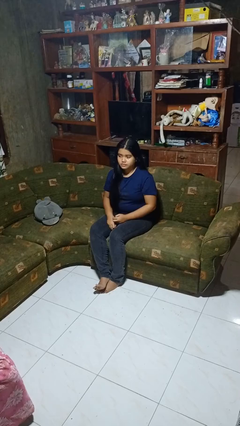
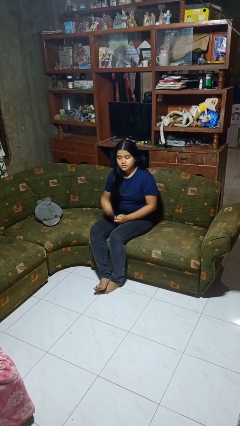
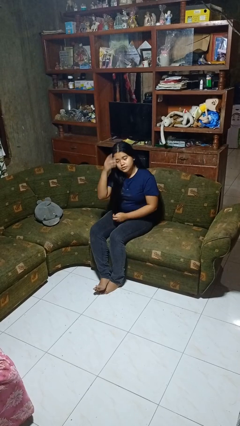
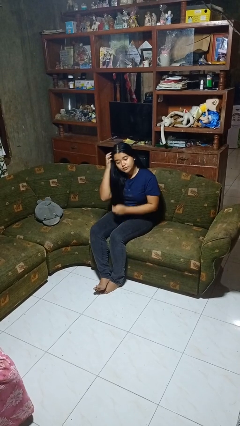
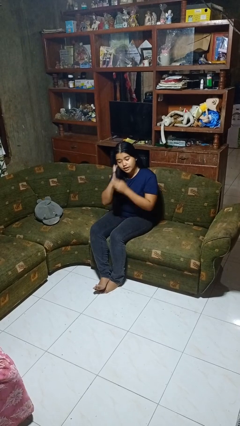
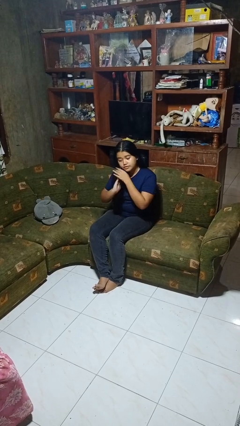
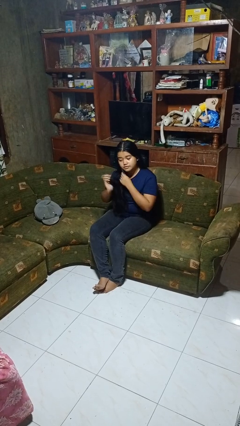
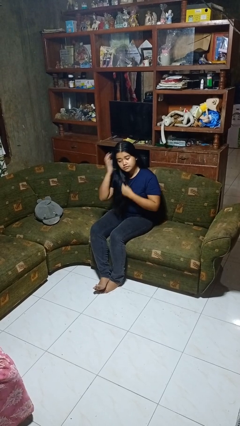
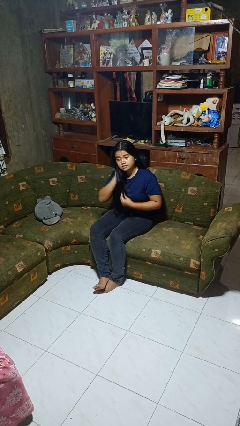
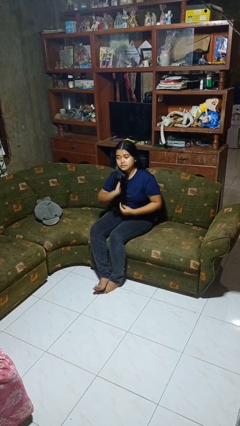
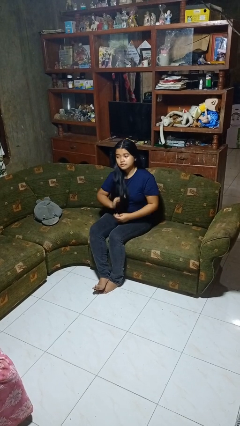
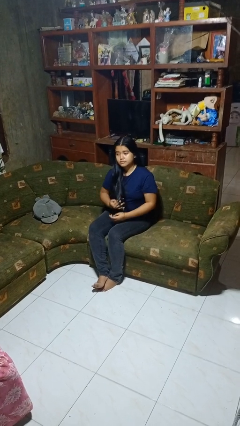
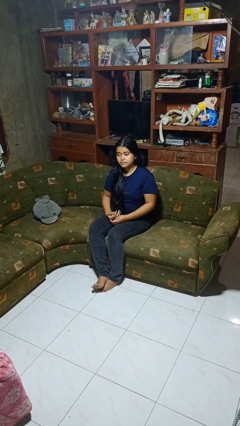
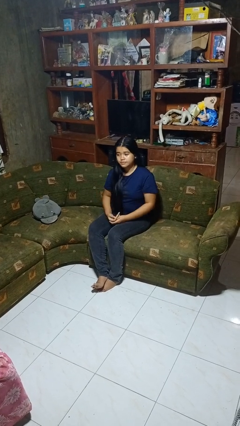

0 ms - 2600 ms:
person strokes hair

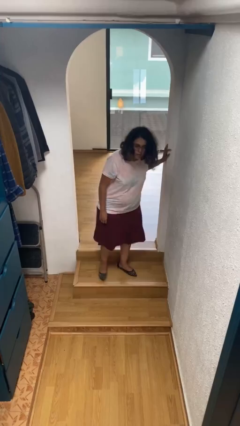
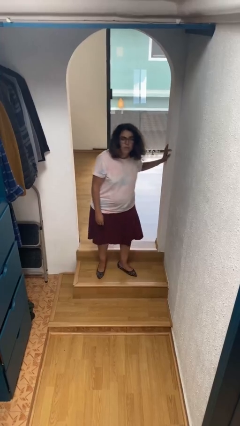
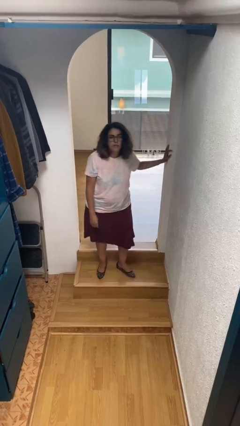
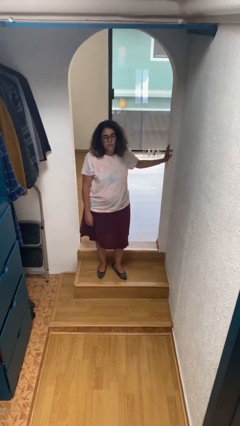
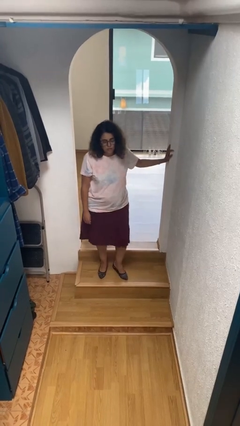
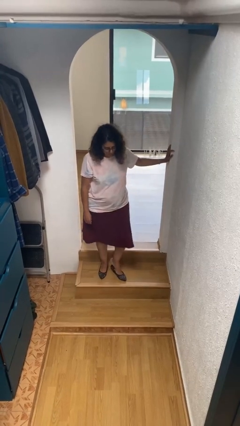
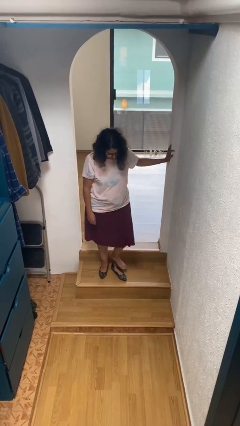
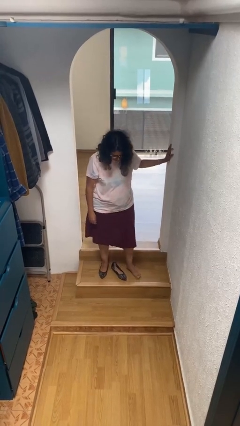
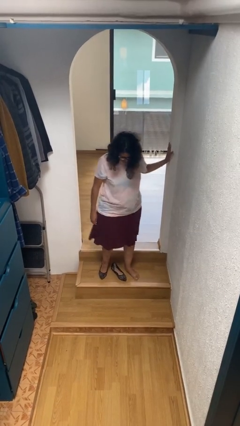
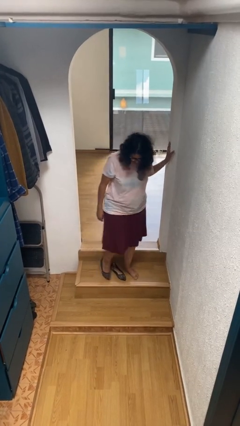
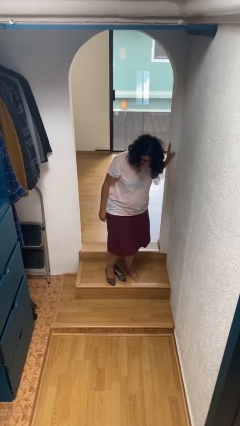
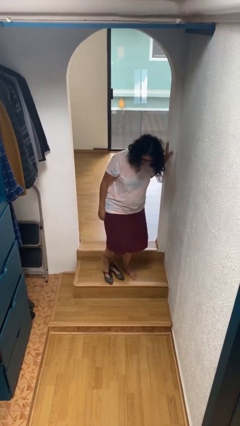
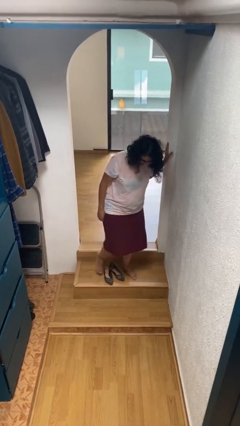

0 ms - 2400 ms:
person takes off shoes

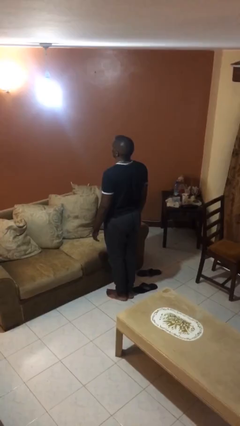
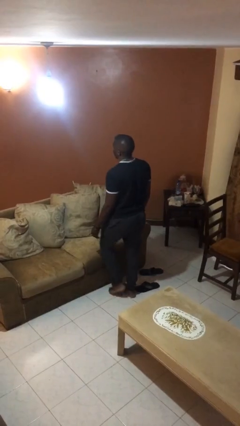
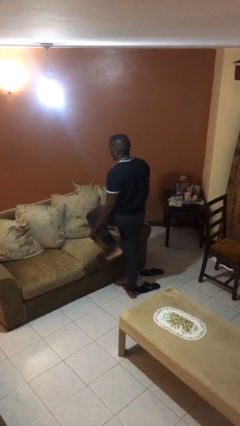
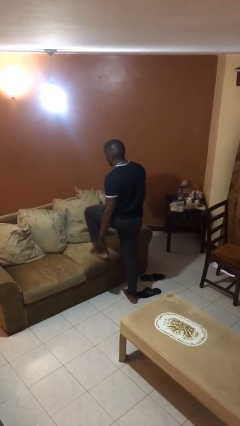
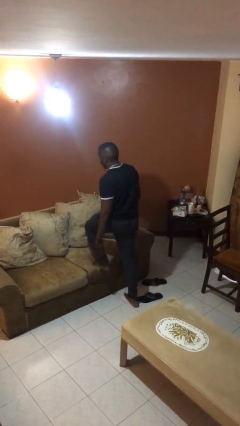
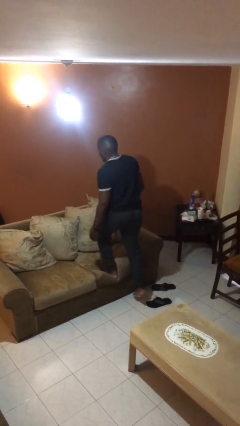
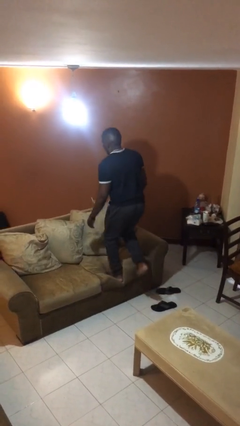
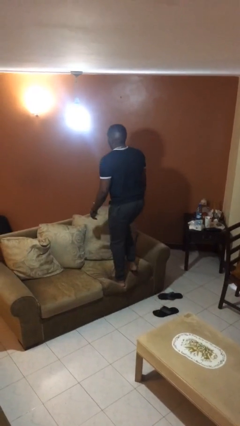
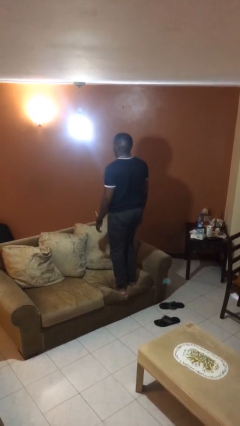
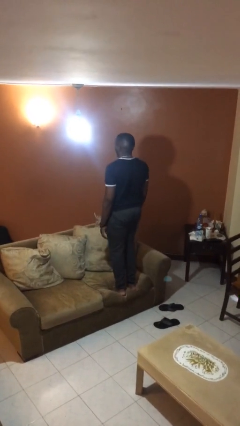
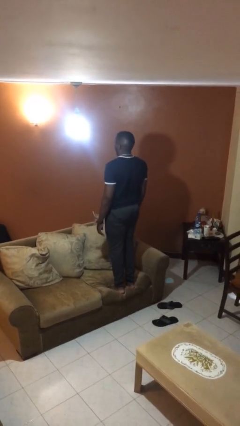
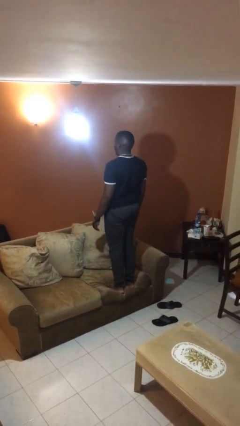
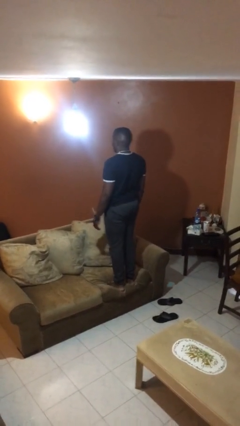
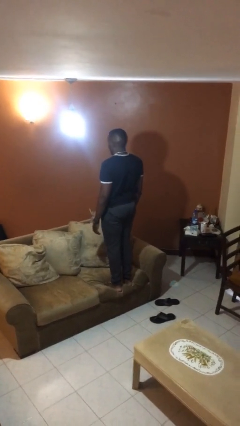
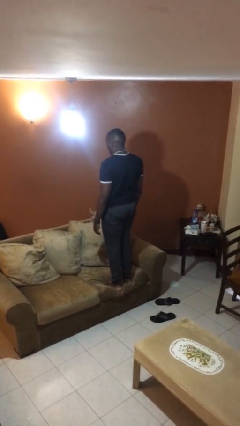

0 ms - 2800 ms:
person climbs on couch

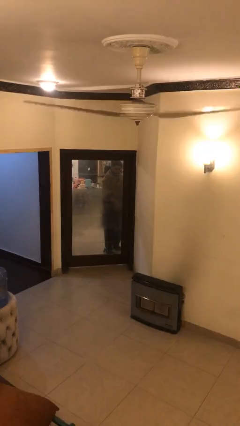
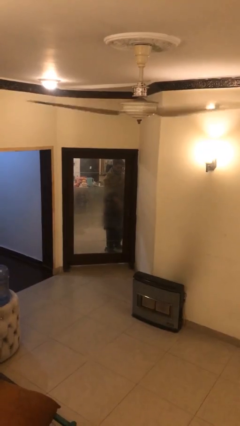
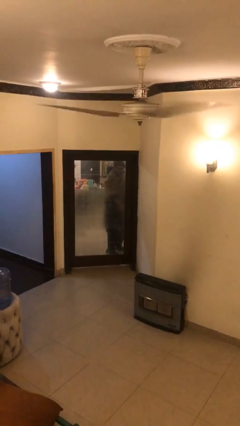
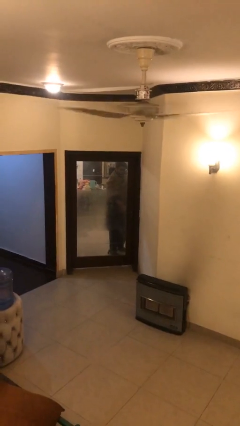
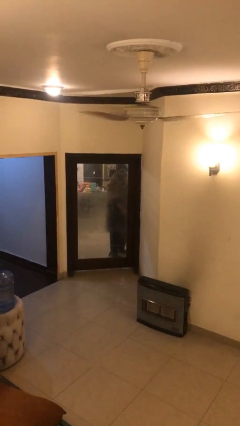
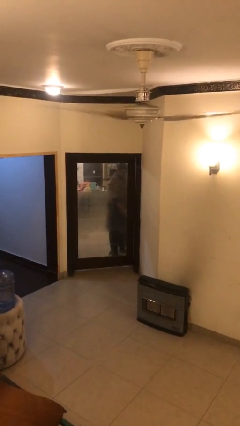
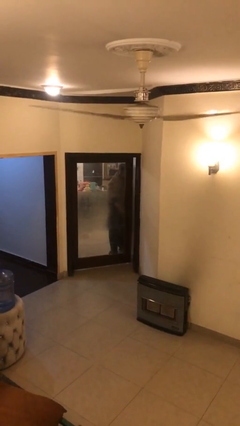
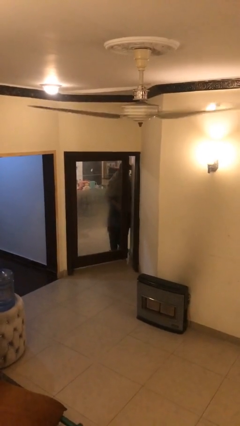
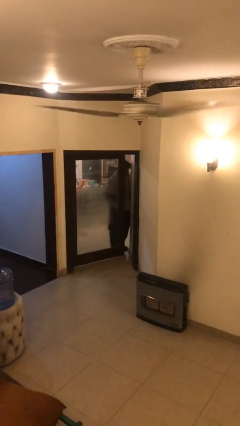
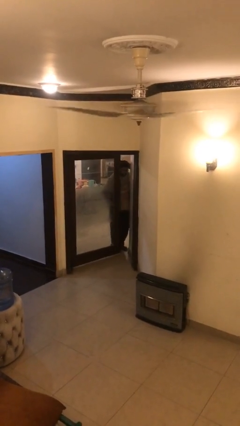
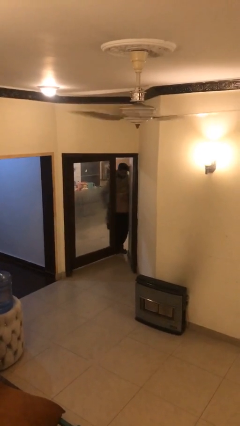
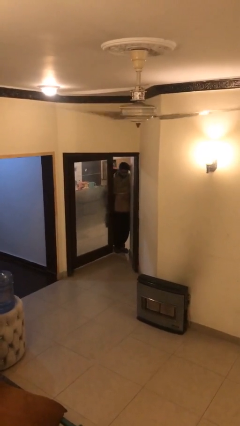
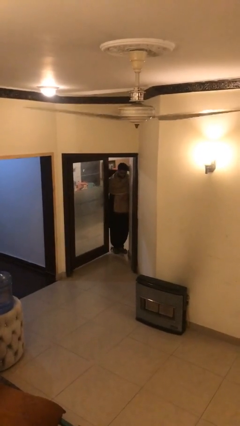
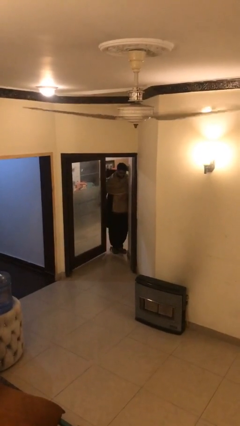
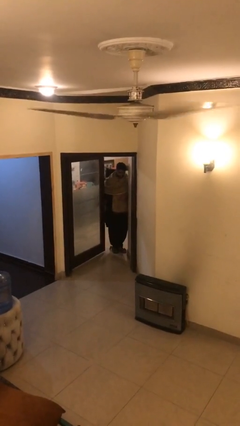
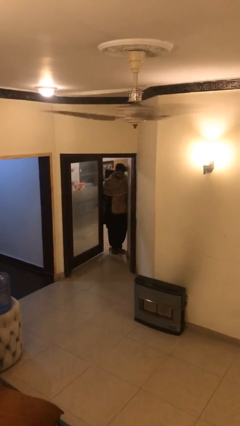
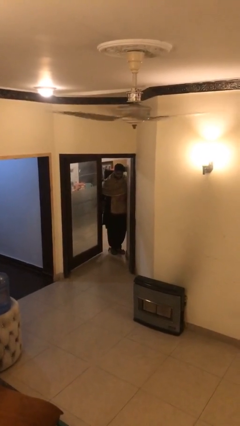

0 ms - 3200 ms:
person opens facility door

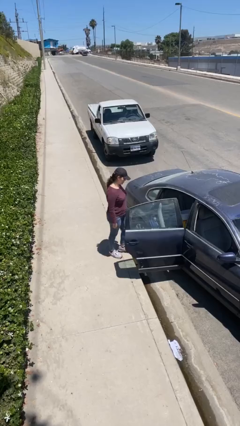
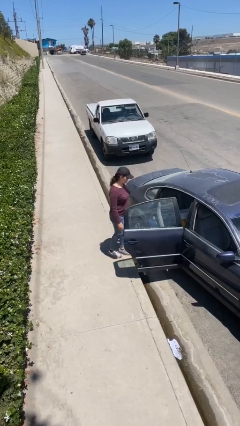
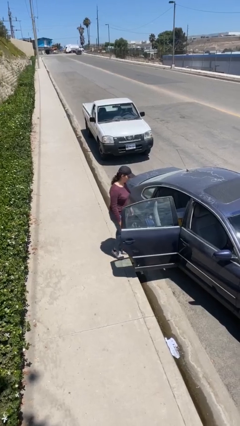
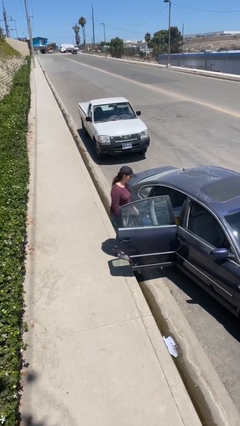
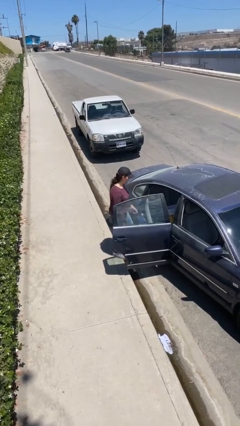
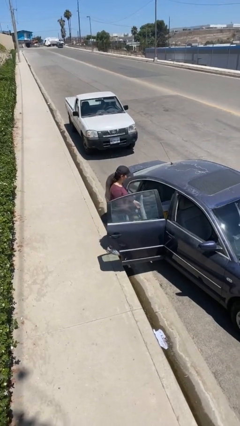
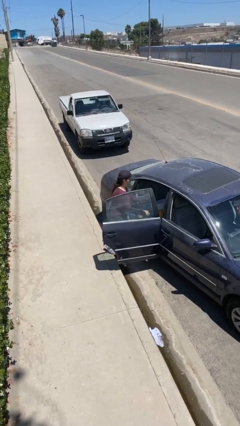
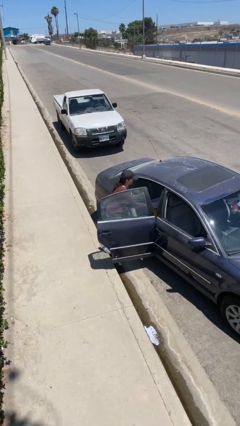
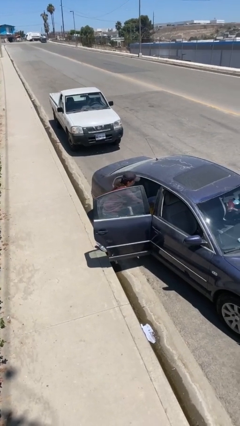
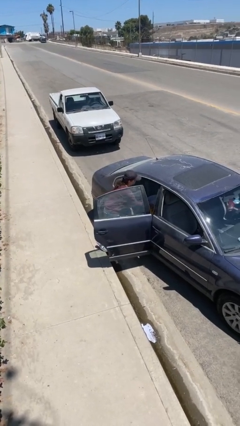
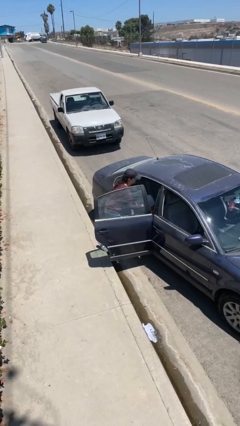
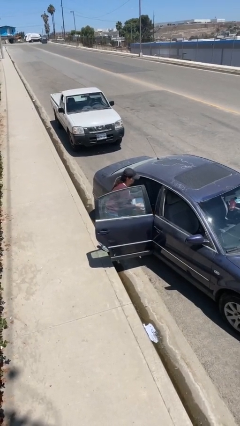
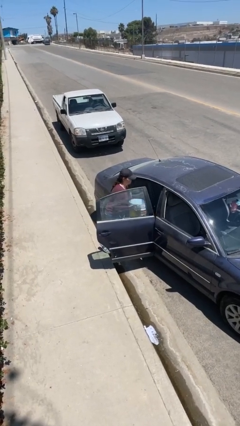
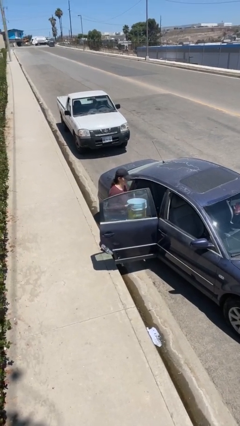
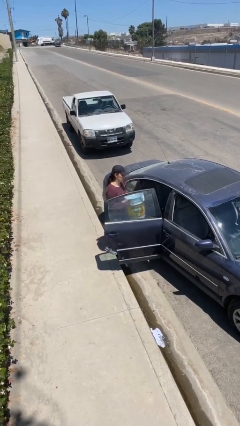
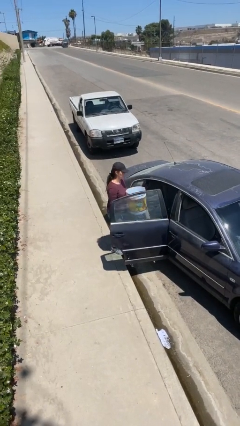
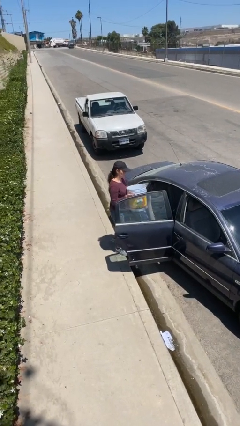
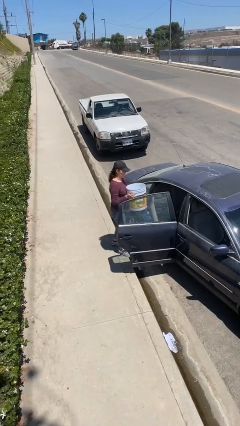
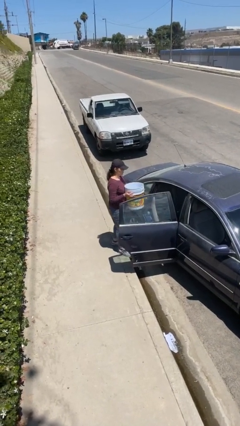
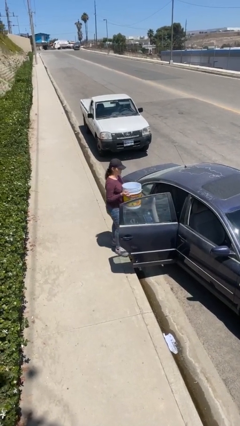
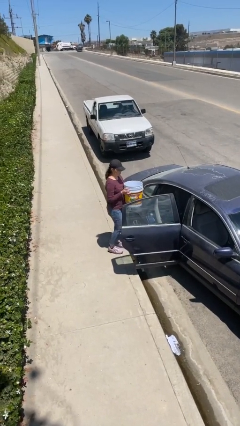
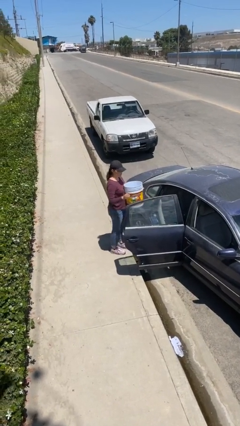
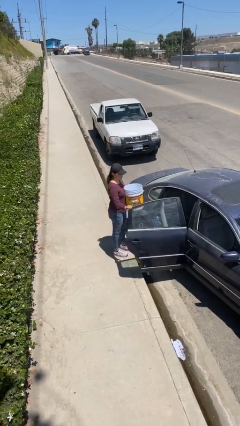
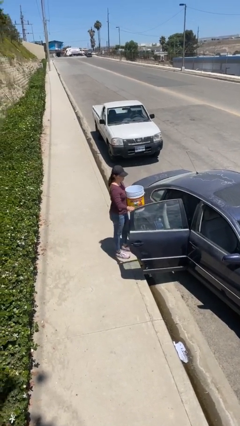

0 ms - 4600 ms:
person unloads car

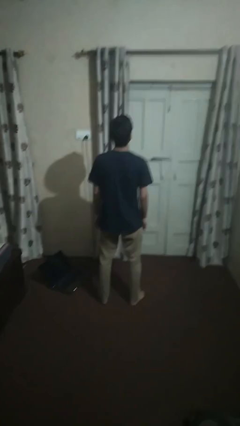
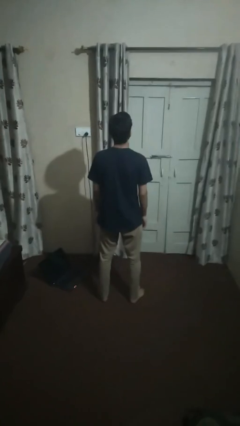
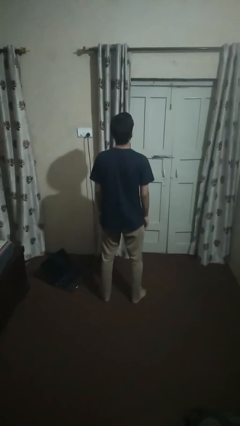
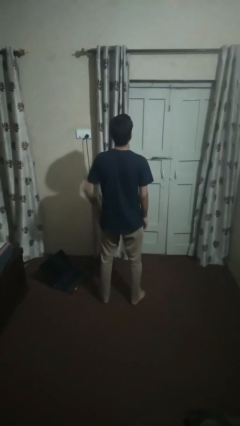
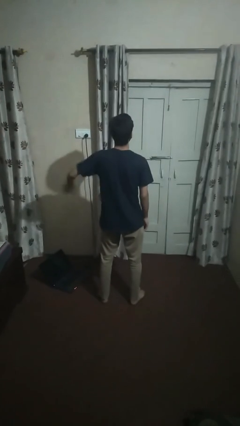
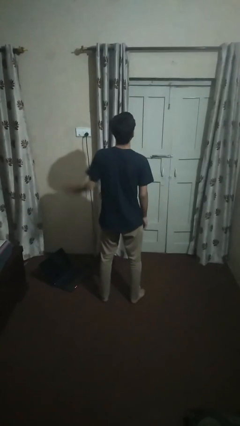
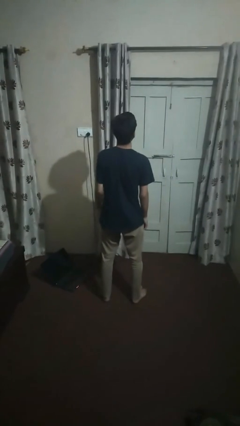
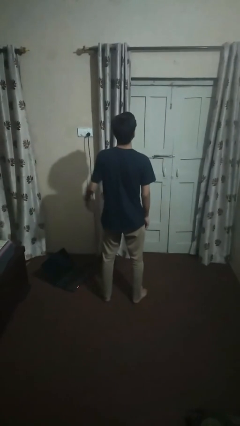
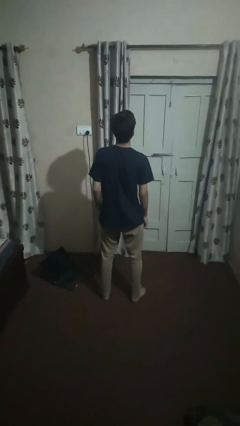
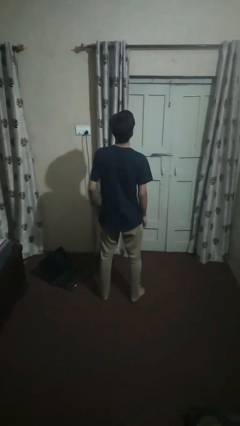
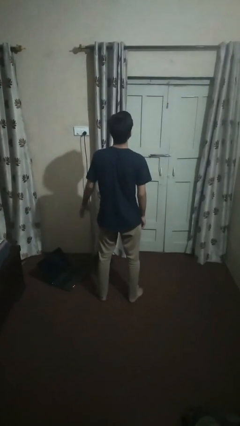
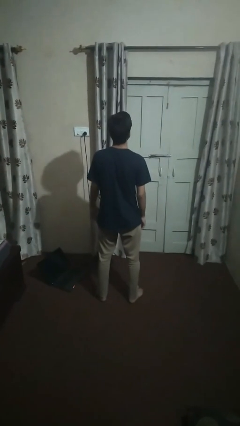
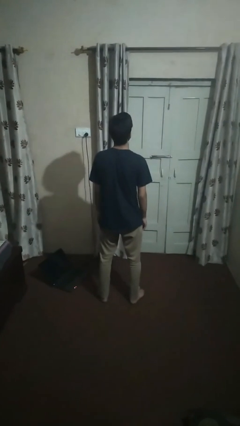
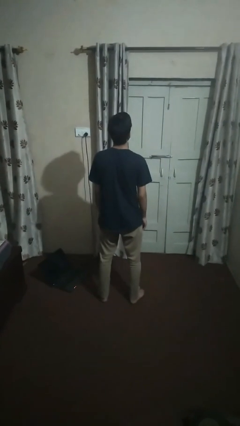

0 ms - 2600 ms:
person slaps hands on thighs
